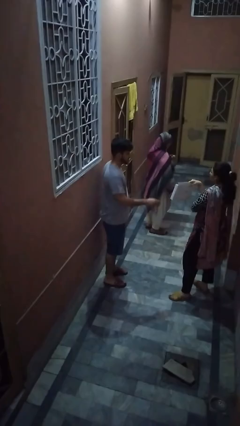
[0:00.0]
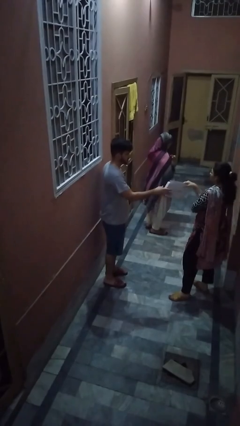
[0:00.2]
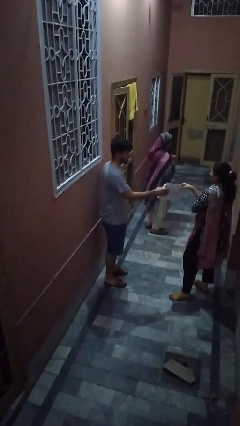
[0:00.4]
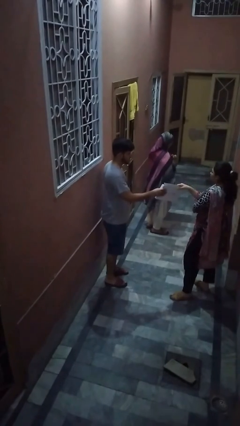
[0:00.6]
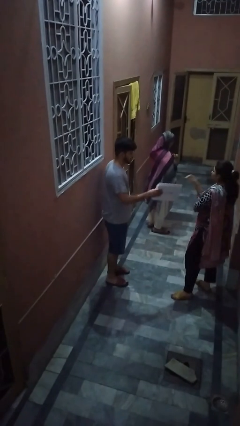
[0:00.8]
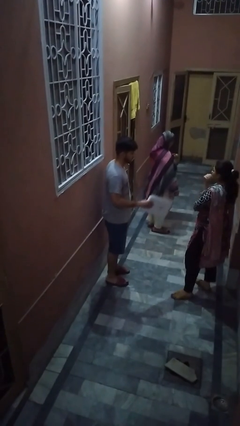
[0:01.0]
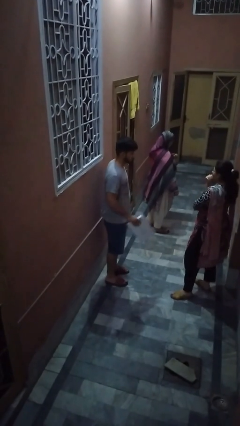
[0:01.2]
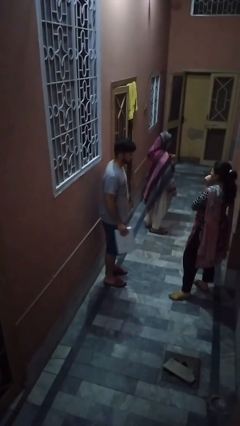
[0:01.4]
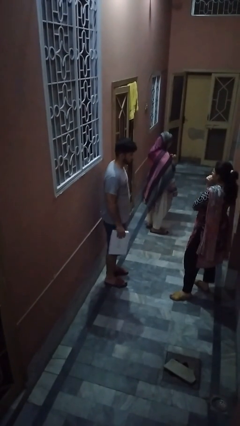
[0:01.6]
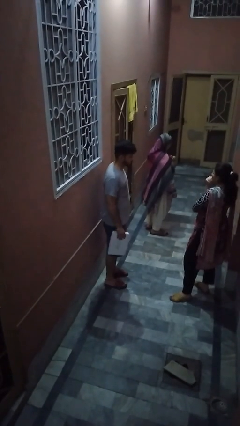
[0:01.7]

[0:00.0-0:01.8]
person transfers object to person

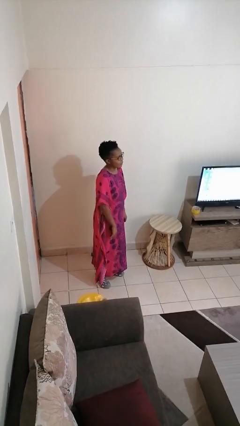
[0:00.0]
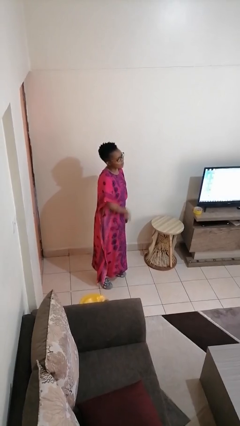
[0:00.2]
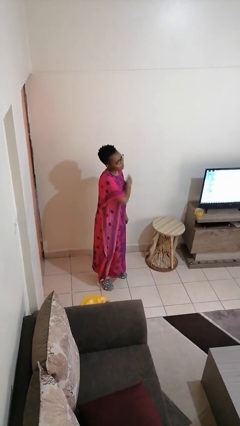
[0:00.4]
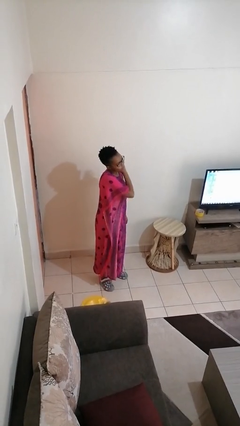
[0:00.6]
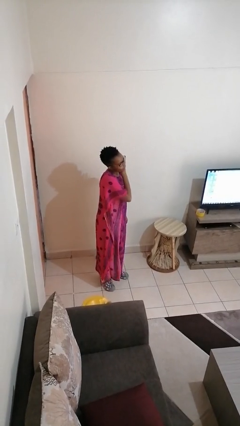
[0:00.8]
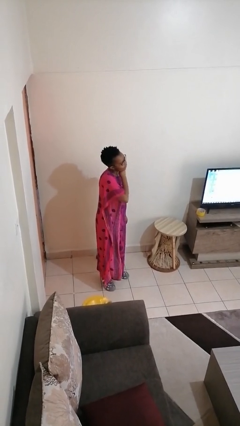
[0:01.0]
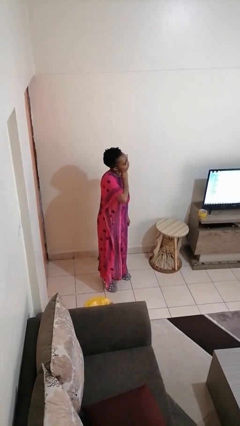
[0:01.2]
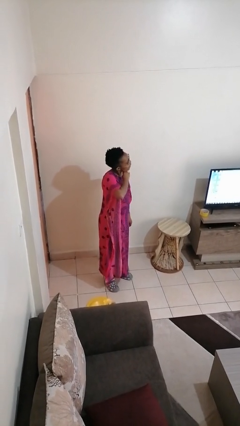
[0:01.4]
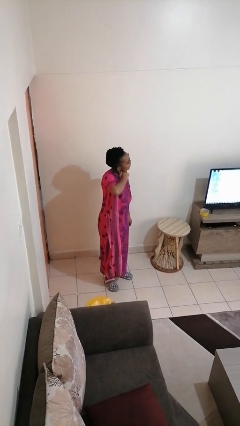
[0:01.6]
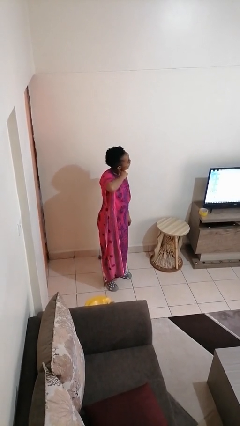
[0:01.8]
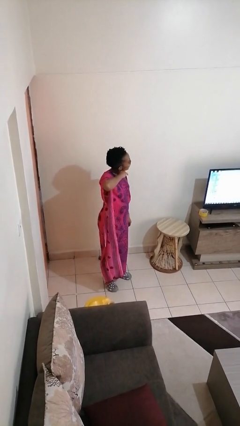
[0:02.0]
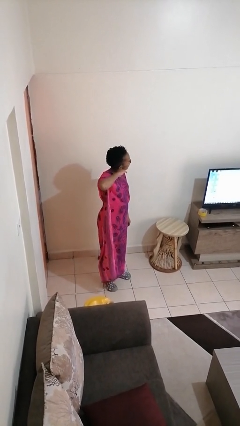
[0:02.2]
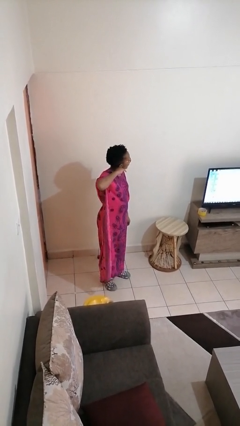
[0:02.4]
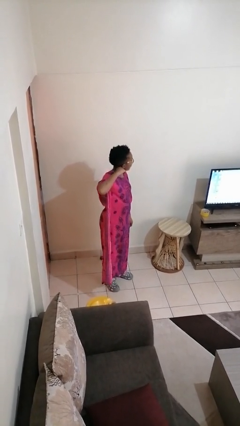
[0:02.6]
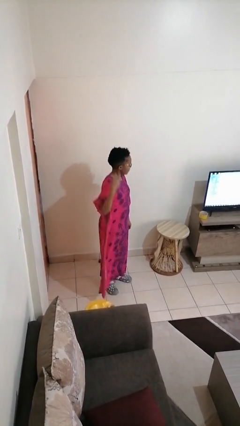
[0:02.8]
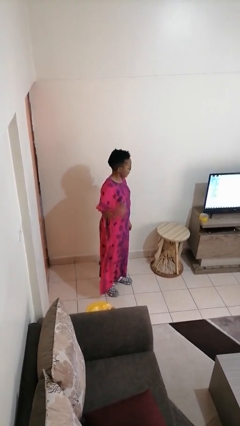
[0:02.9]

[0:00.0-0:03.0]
person gestures cut

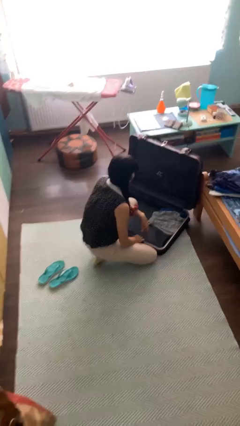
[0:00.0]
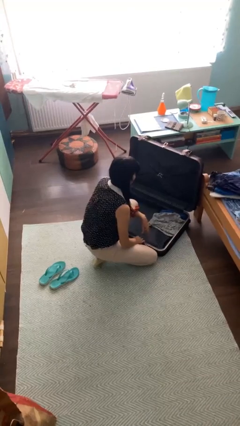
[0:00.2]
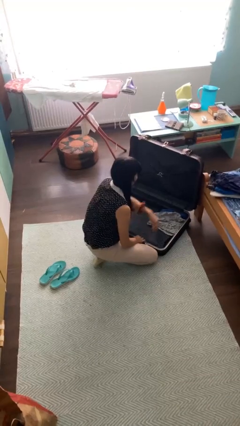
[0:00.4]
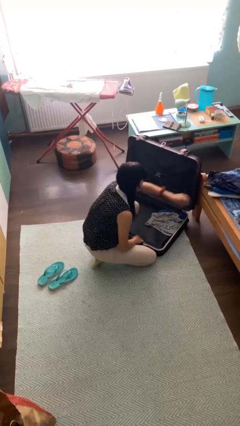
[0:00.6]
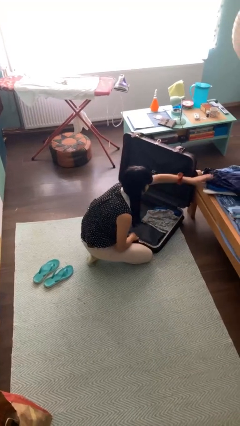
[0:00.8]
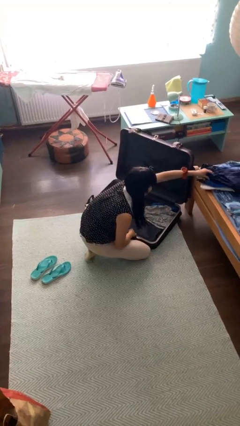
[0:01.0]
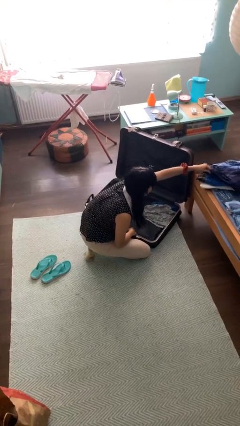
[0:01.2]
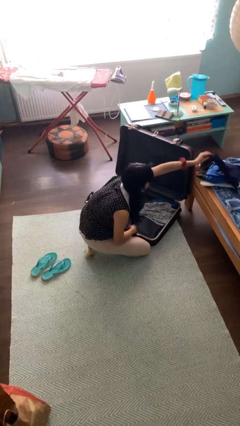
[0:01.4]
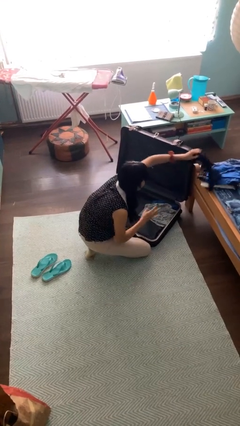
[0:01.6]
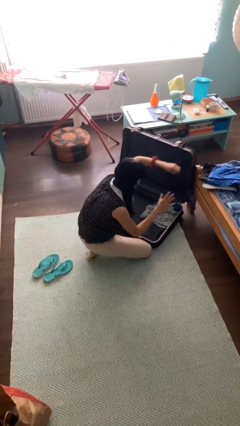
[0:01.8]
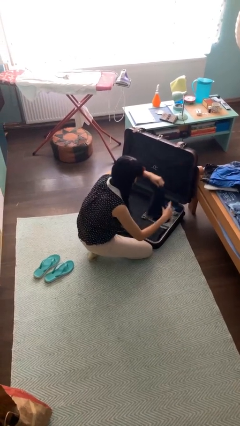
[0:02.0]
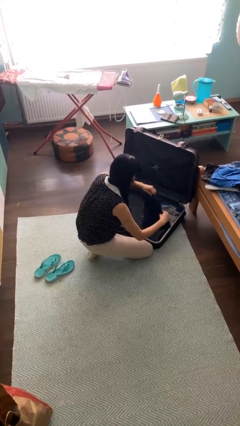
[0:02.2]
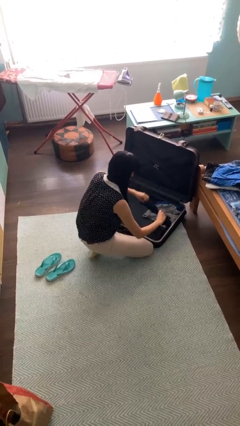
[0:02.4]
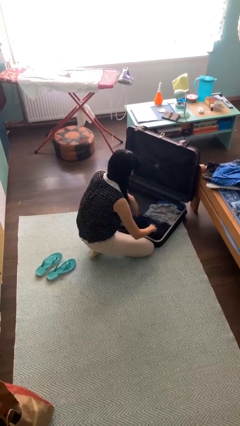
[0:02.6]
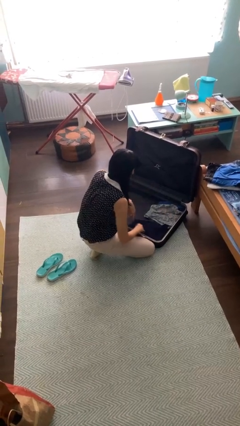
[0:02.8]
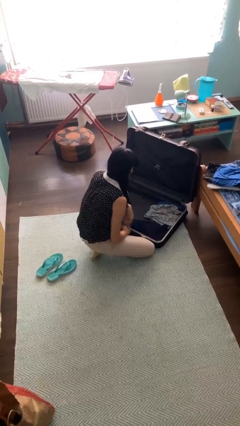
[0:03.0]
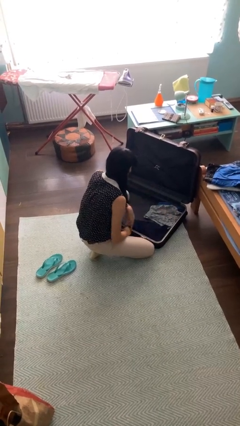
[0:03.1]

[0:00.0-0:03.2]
person loads clothes into suitcase

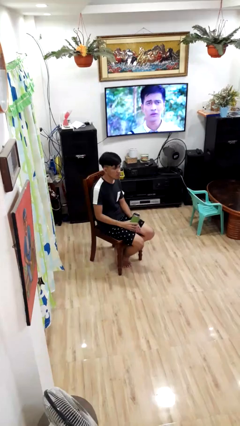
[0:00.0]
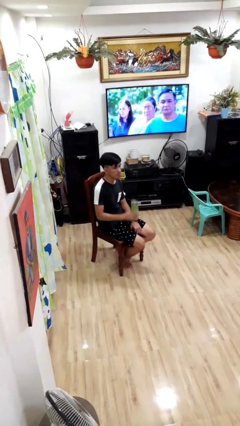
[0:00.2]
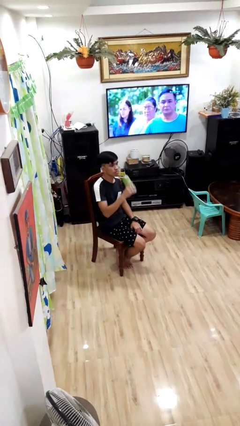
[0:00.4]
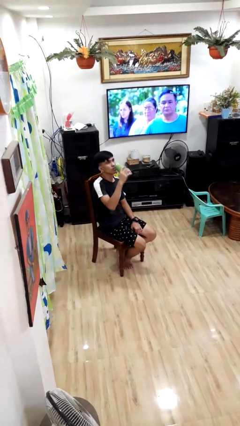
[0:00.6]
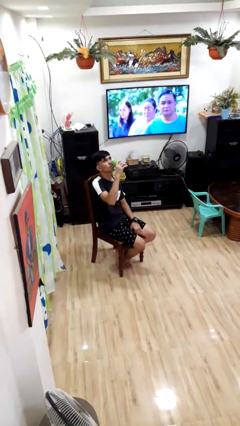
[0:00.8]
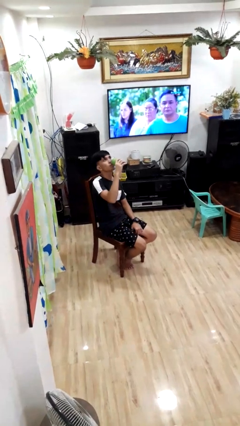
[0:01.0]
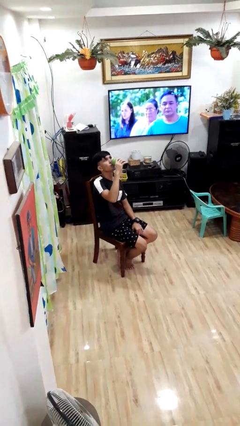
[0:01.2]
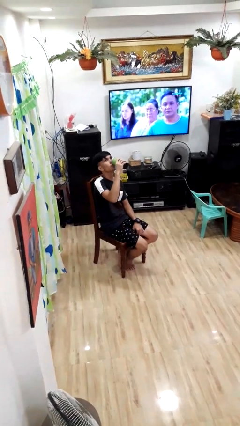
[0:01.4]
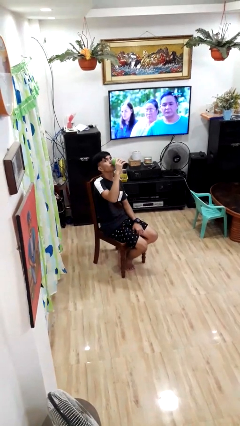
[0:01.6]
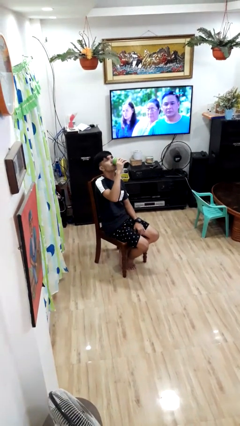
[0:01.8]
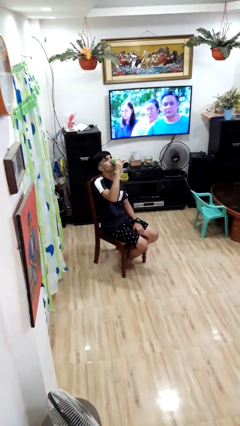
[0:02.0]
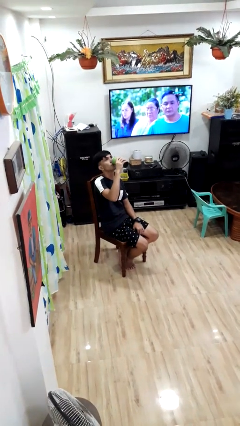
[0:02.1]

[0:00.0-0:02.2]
person drinks from bottle

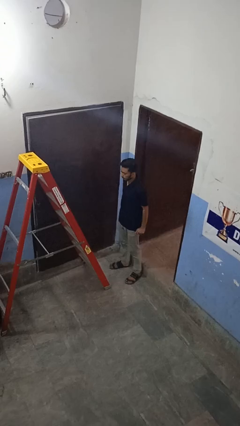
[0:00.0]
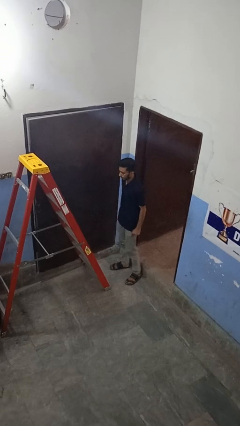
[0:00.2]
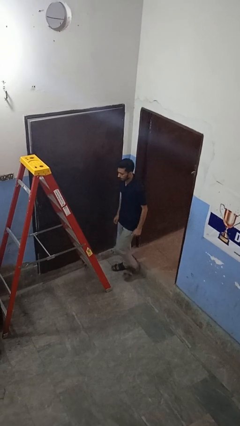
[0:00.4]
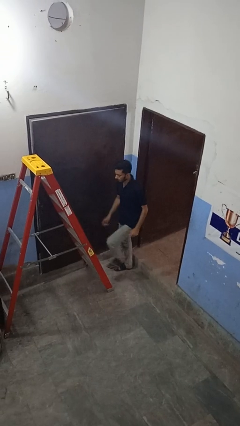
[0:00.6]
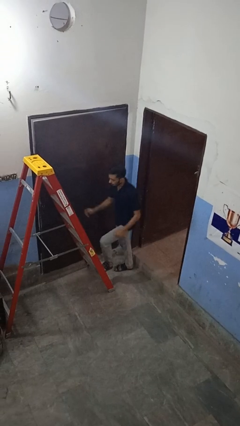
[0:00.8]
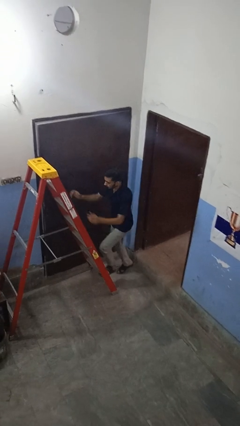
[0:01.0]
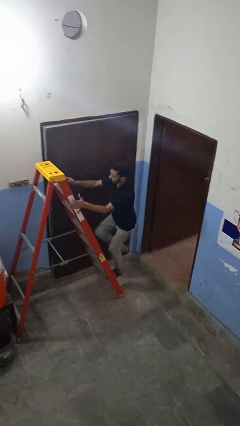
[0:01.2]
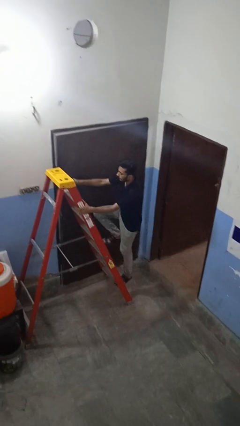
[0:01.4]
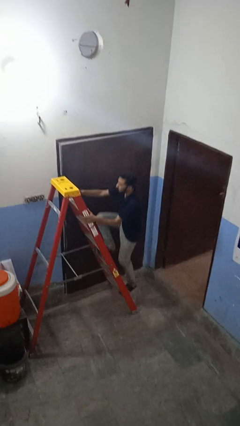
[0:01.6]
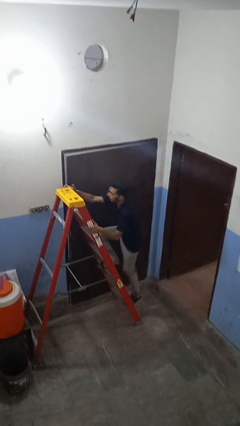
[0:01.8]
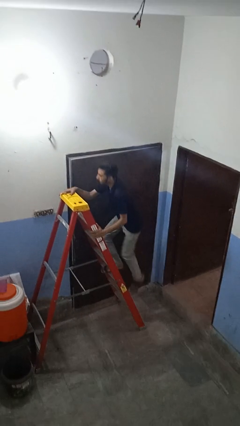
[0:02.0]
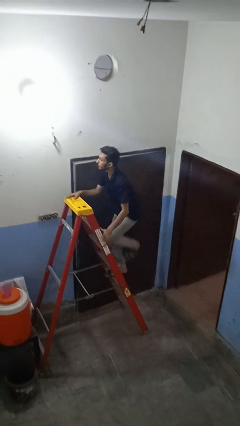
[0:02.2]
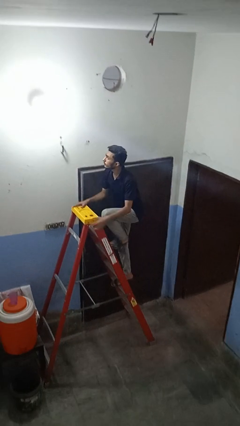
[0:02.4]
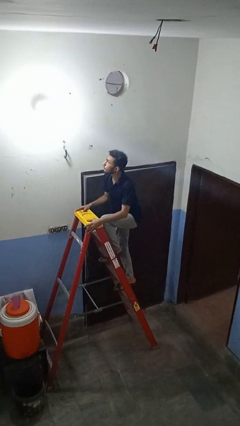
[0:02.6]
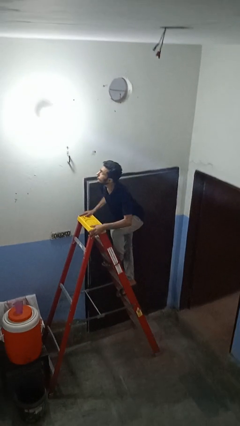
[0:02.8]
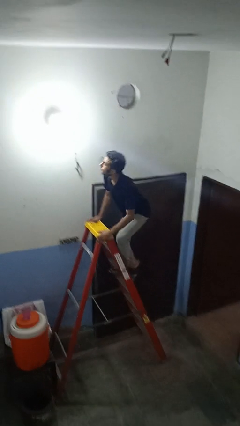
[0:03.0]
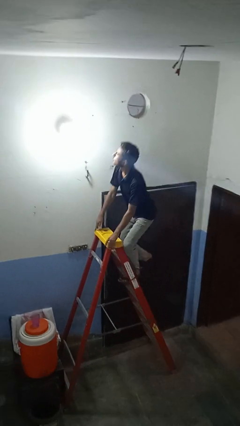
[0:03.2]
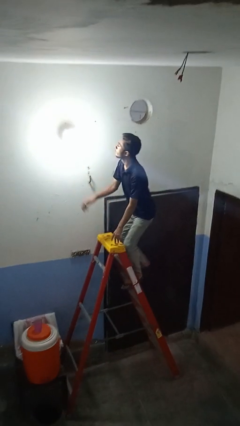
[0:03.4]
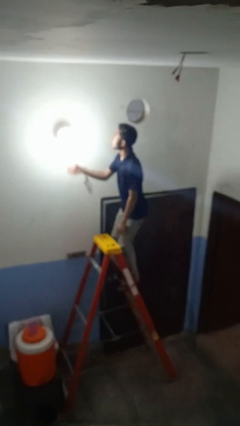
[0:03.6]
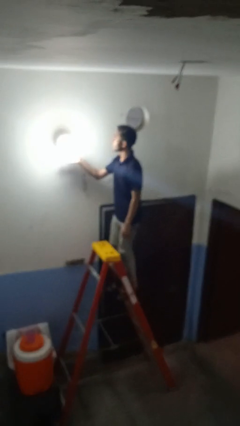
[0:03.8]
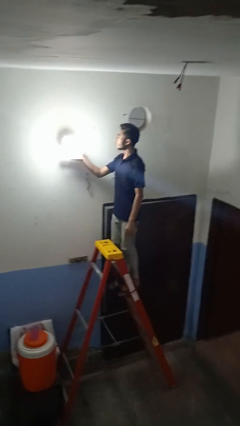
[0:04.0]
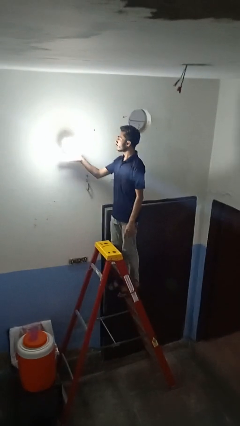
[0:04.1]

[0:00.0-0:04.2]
person climbs up ladder

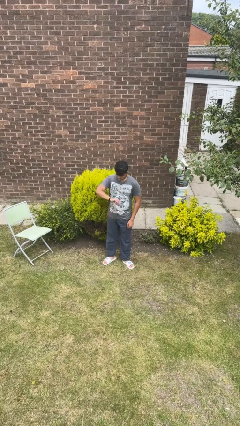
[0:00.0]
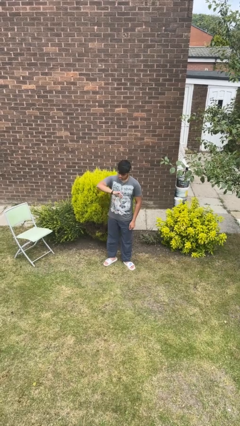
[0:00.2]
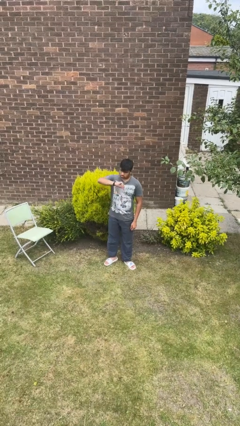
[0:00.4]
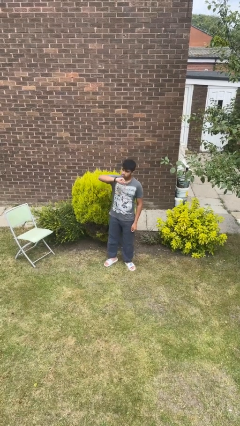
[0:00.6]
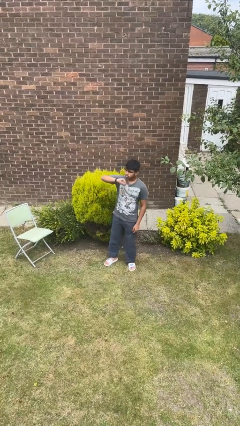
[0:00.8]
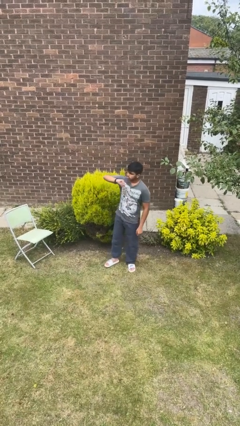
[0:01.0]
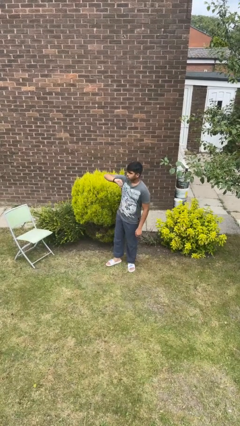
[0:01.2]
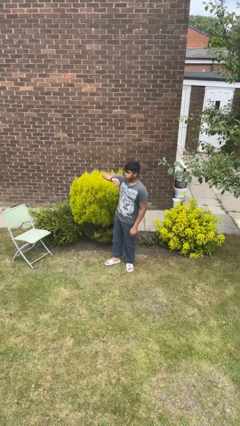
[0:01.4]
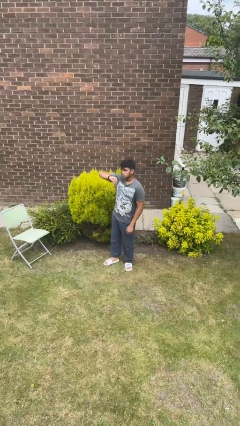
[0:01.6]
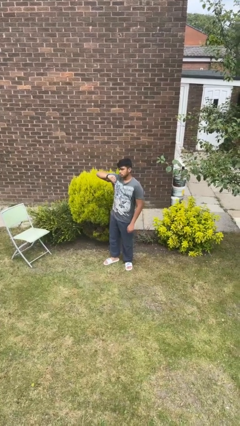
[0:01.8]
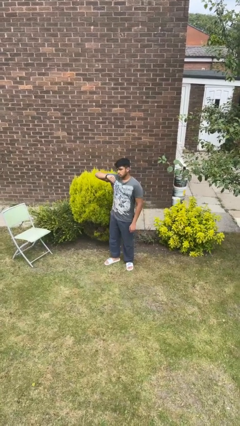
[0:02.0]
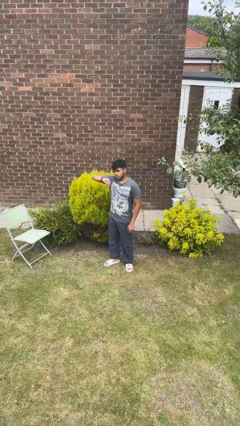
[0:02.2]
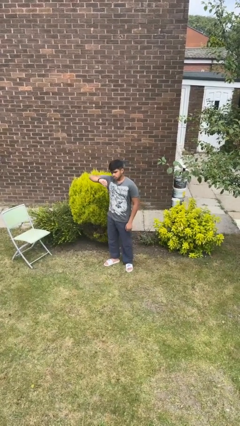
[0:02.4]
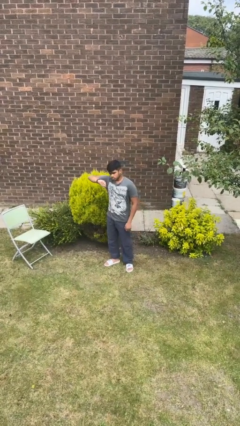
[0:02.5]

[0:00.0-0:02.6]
person looks at wristwatch

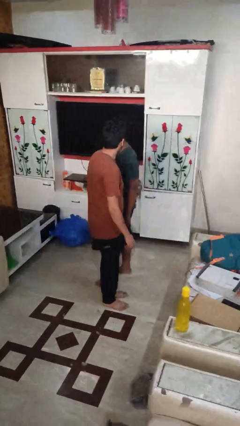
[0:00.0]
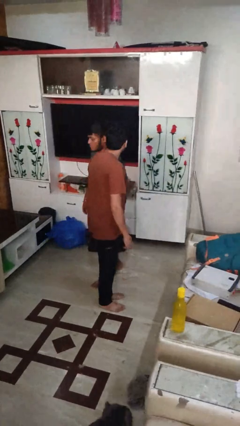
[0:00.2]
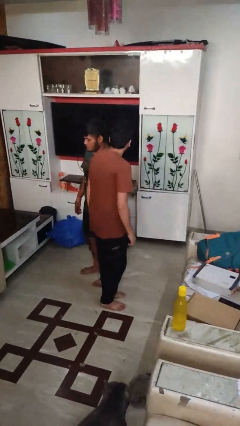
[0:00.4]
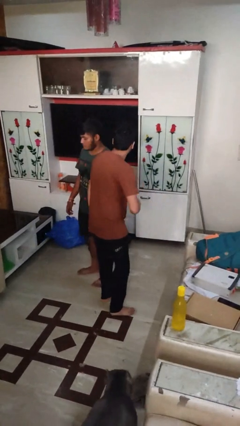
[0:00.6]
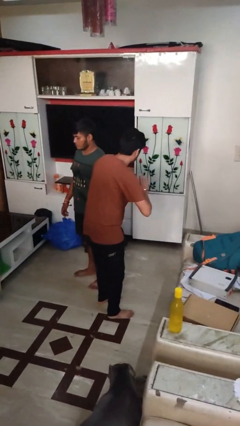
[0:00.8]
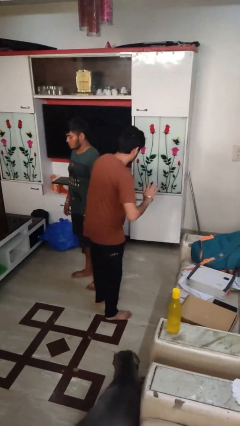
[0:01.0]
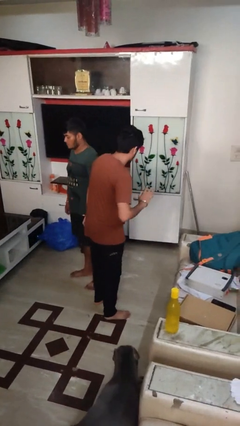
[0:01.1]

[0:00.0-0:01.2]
person bumps into person
